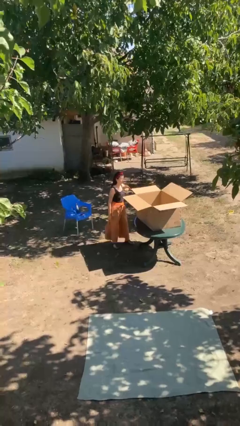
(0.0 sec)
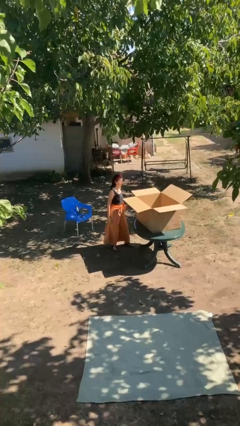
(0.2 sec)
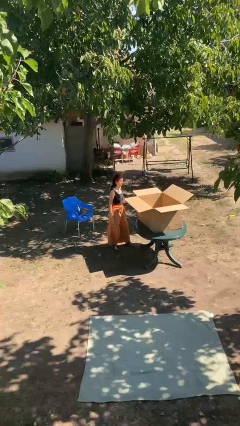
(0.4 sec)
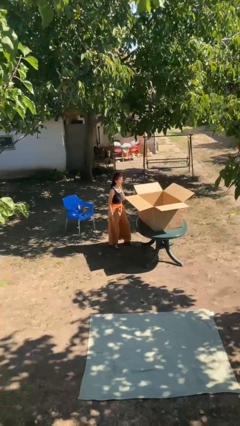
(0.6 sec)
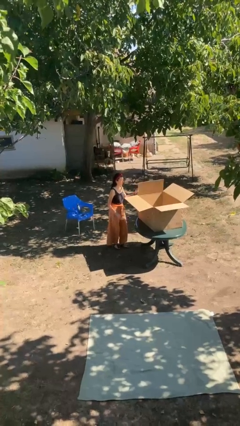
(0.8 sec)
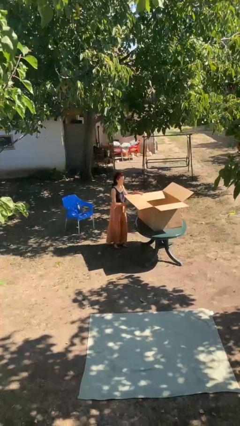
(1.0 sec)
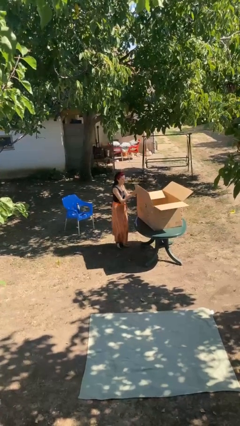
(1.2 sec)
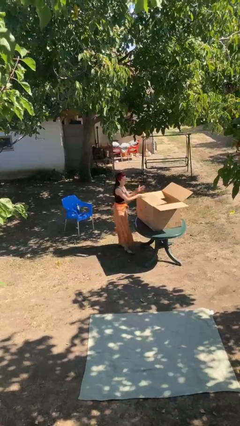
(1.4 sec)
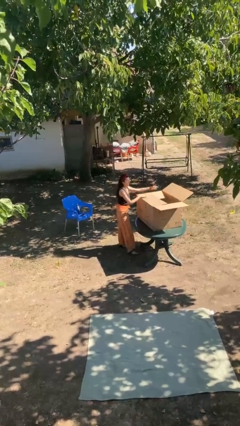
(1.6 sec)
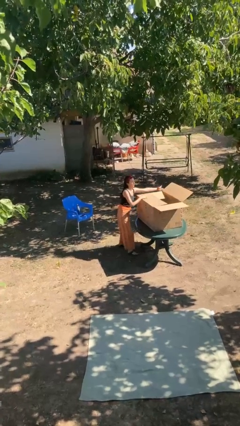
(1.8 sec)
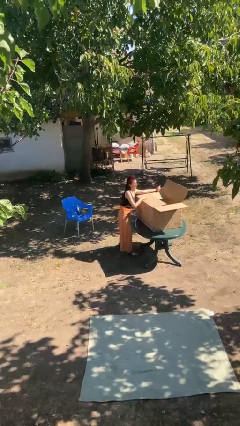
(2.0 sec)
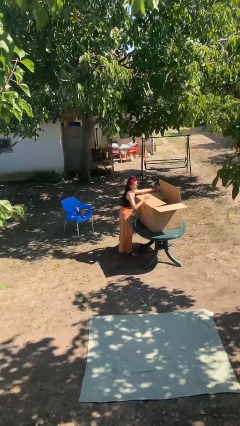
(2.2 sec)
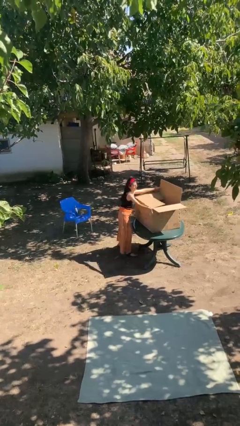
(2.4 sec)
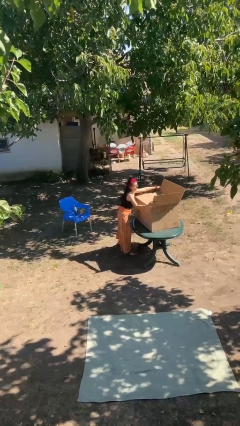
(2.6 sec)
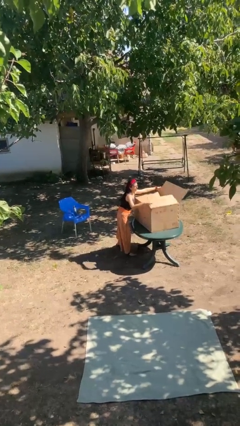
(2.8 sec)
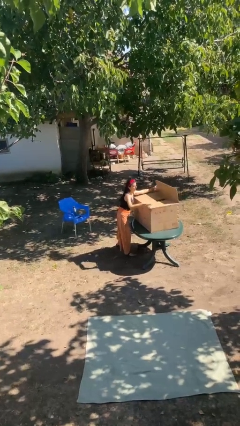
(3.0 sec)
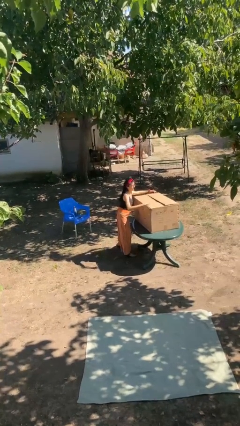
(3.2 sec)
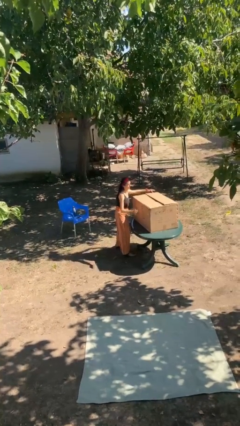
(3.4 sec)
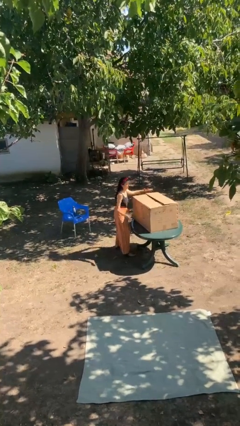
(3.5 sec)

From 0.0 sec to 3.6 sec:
person closes box

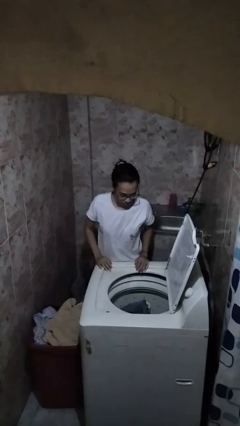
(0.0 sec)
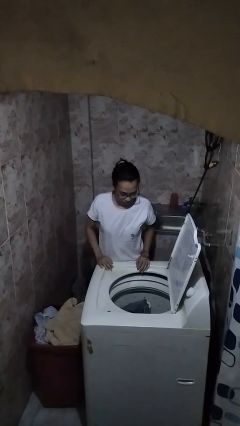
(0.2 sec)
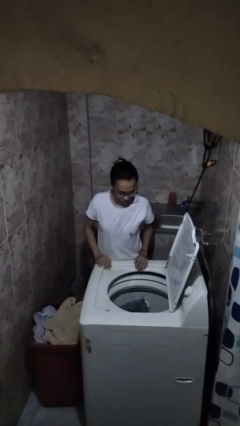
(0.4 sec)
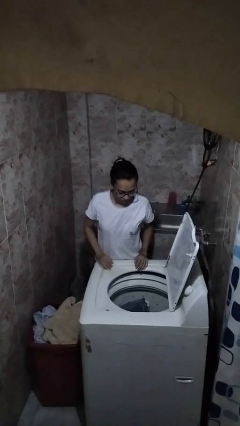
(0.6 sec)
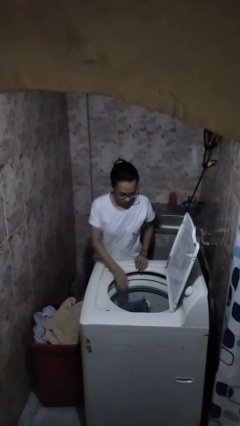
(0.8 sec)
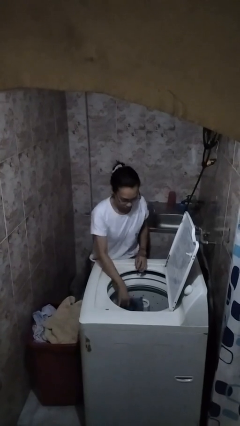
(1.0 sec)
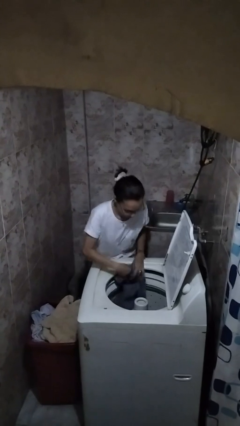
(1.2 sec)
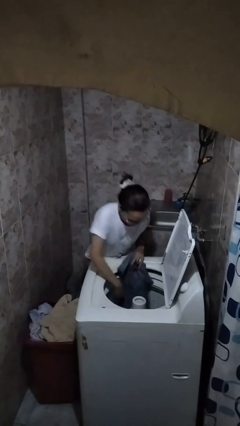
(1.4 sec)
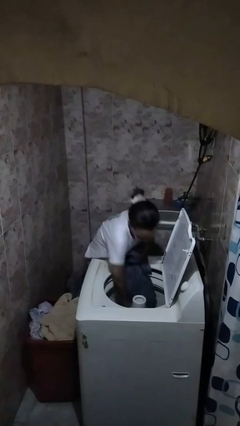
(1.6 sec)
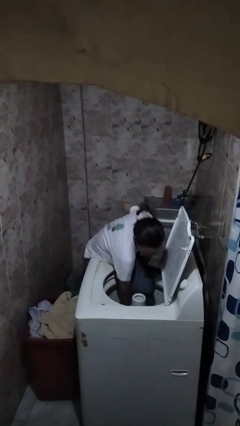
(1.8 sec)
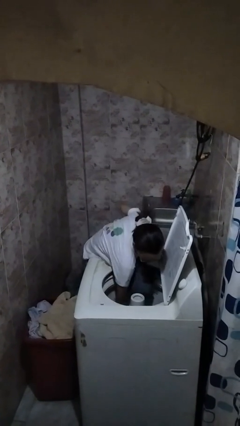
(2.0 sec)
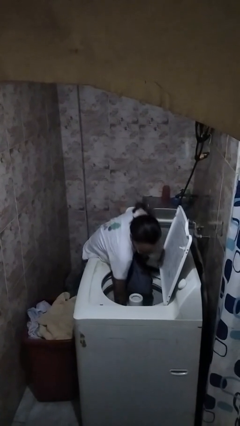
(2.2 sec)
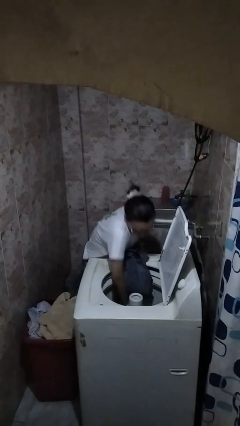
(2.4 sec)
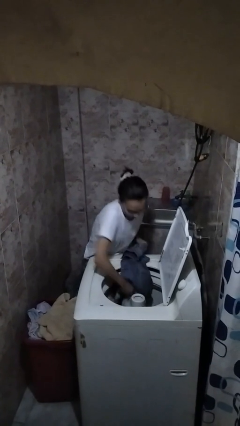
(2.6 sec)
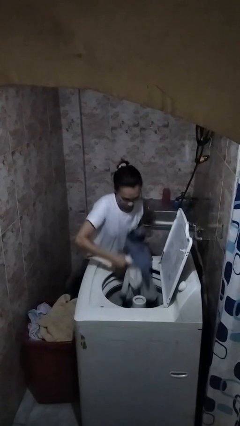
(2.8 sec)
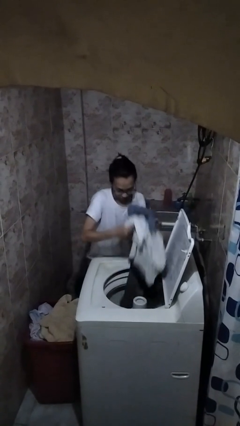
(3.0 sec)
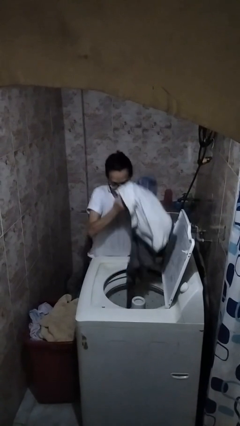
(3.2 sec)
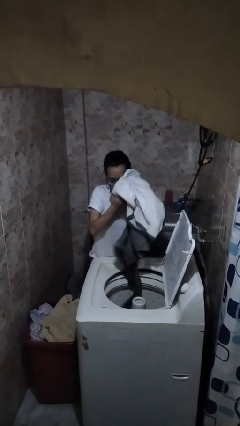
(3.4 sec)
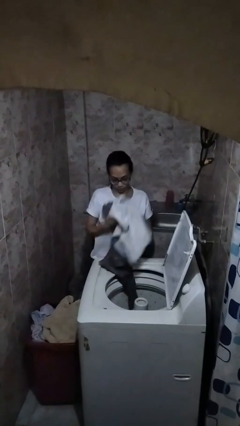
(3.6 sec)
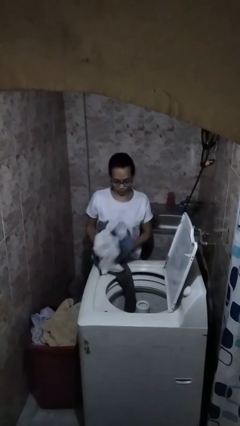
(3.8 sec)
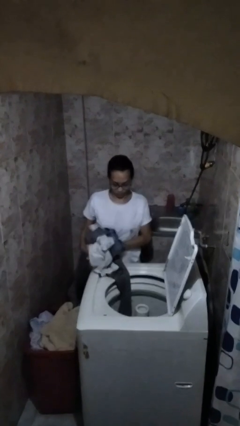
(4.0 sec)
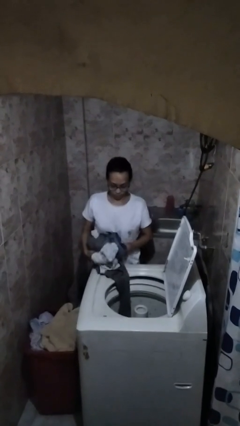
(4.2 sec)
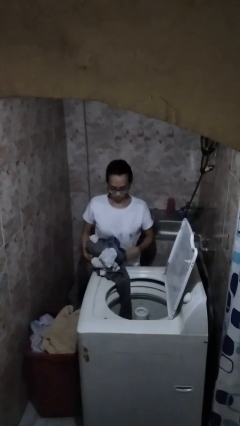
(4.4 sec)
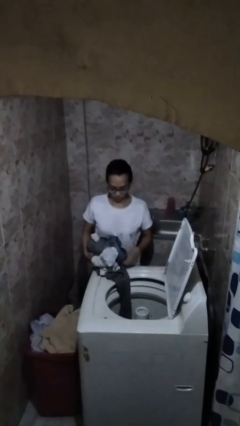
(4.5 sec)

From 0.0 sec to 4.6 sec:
person loads clotheswasher

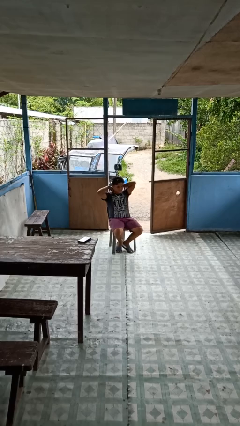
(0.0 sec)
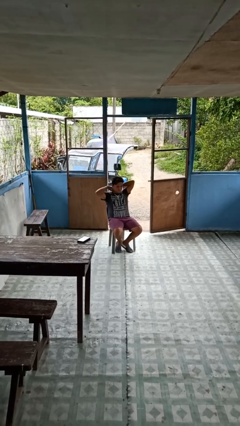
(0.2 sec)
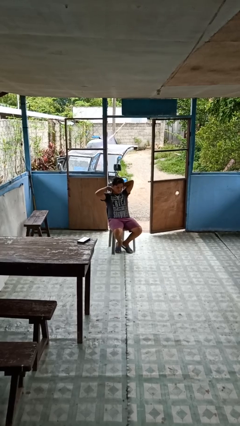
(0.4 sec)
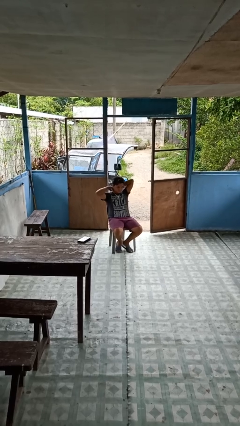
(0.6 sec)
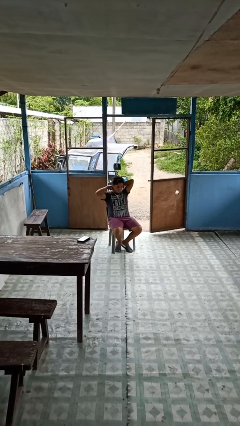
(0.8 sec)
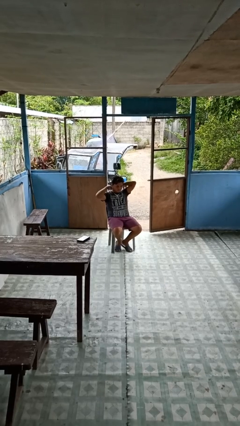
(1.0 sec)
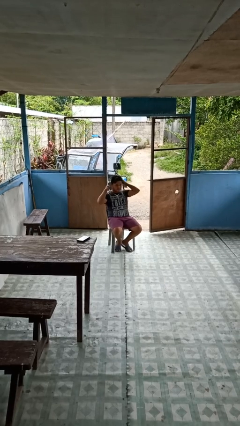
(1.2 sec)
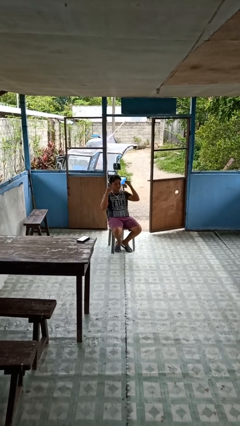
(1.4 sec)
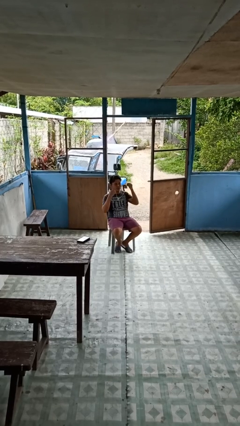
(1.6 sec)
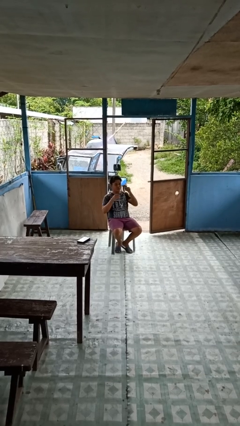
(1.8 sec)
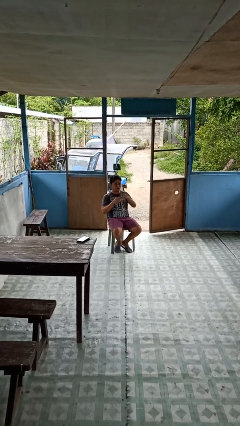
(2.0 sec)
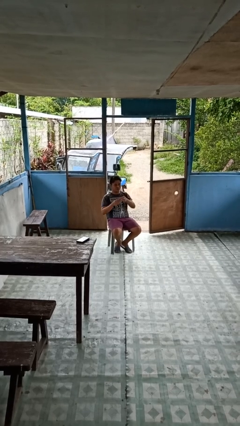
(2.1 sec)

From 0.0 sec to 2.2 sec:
person takes off necklace

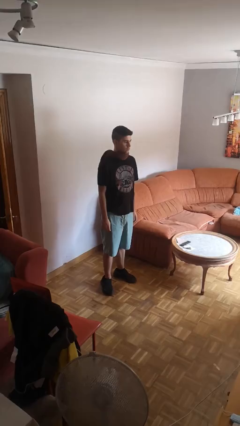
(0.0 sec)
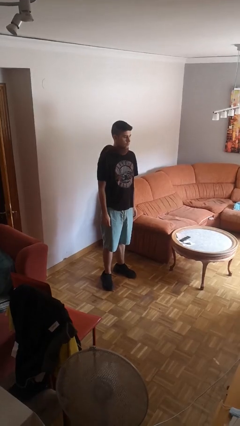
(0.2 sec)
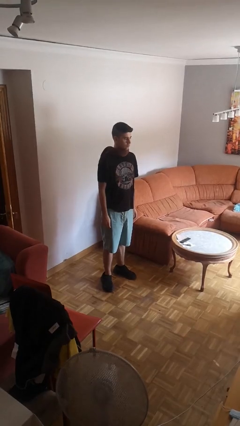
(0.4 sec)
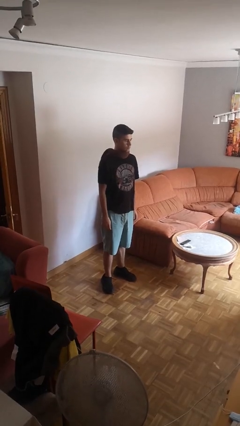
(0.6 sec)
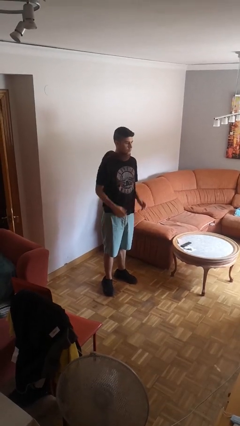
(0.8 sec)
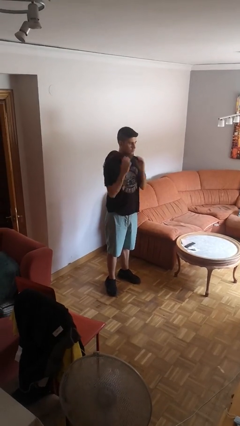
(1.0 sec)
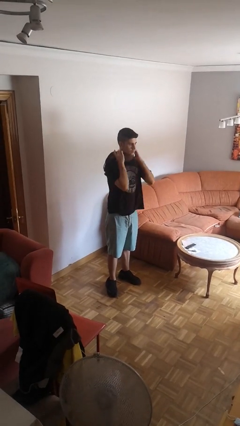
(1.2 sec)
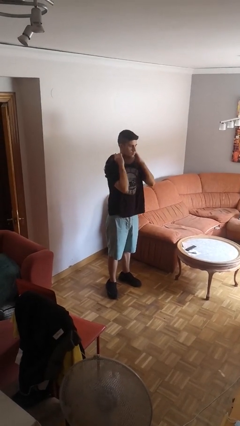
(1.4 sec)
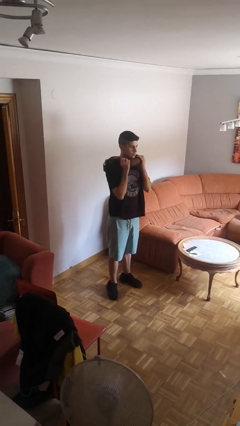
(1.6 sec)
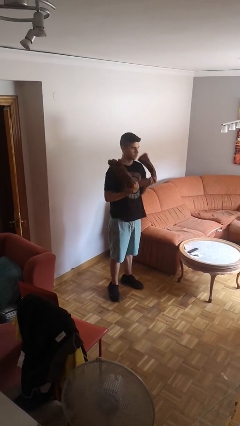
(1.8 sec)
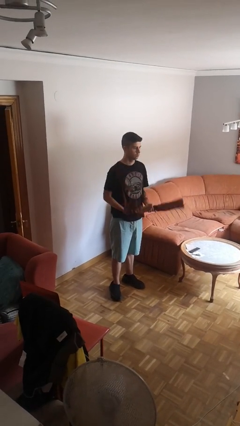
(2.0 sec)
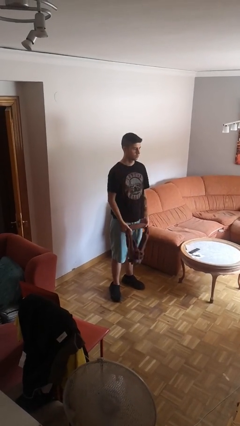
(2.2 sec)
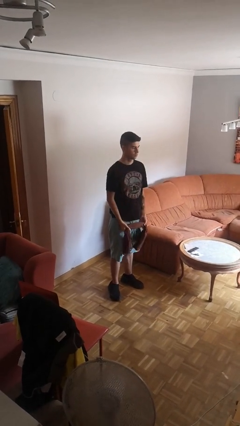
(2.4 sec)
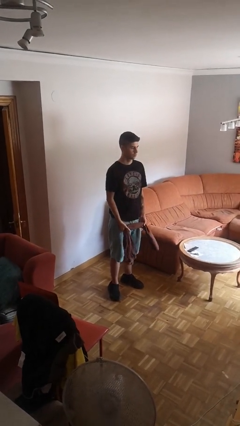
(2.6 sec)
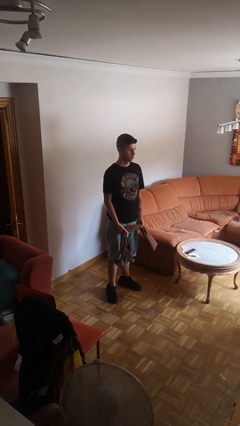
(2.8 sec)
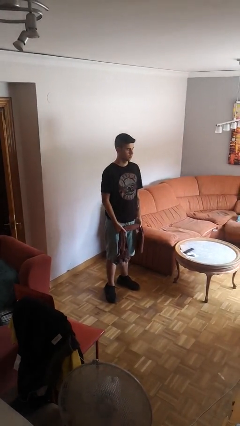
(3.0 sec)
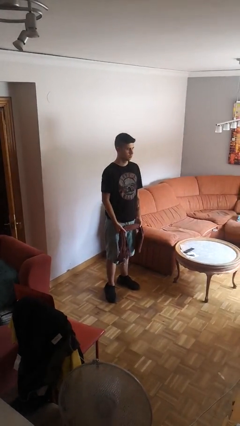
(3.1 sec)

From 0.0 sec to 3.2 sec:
person takes off scarf

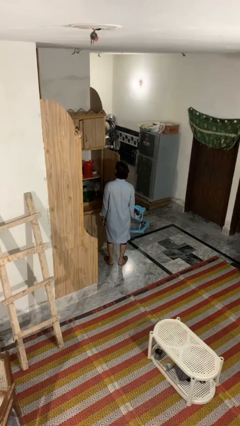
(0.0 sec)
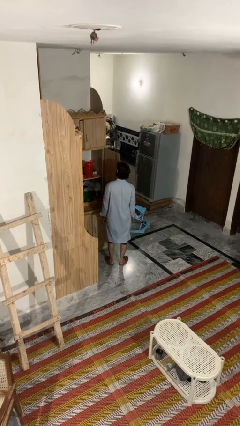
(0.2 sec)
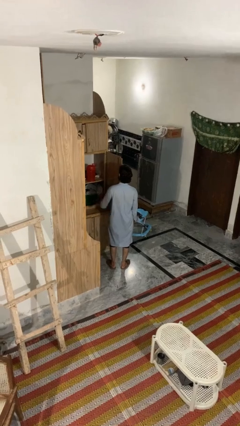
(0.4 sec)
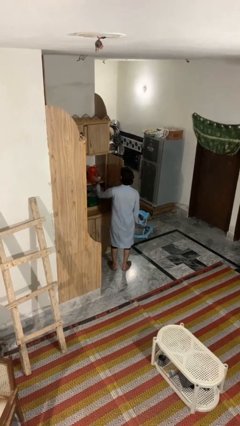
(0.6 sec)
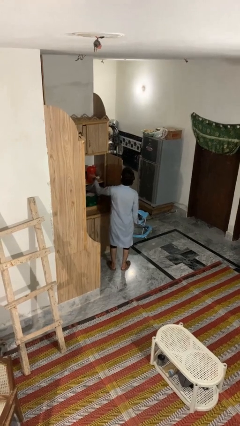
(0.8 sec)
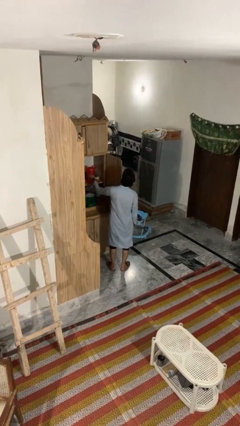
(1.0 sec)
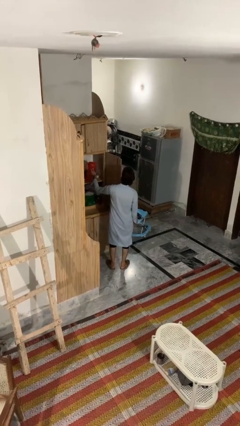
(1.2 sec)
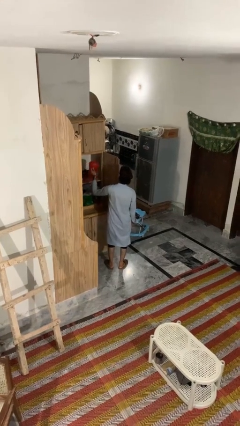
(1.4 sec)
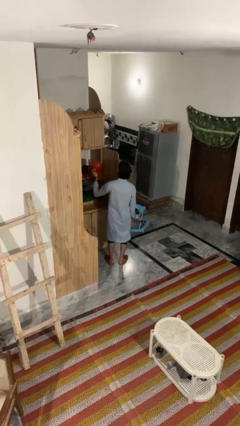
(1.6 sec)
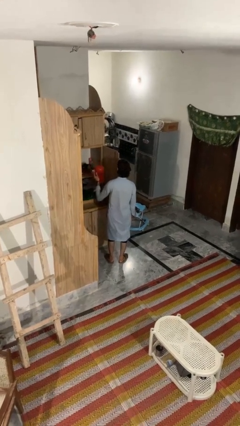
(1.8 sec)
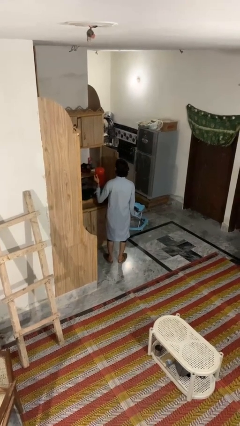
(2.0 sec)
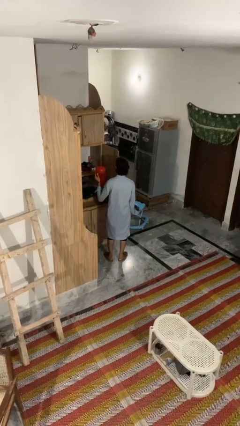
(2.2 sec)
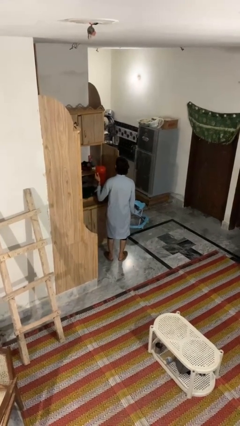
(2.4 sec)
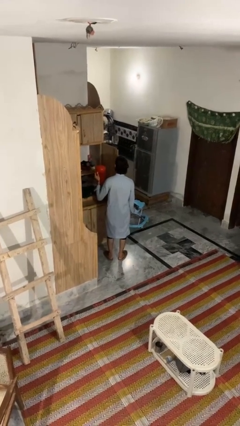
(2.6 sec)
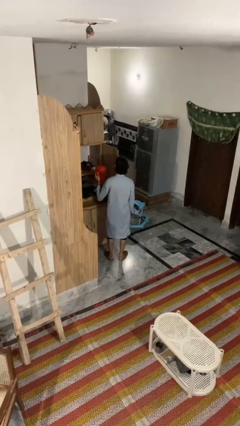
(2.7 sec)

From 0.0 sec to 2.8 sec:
person picks up object from cabinet

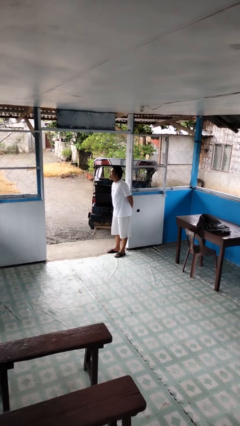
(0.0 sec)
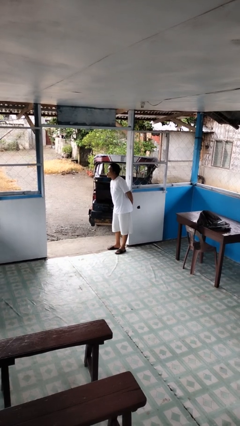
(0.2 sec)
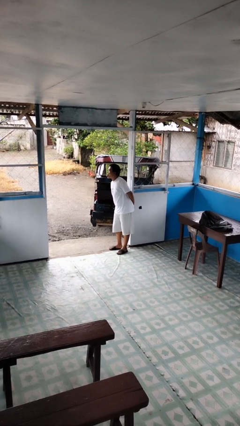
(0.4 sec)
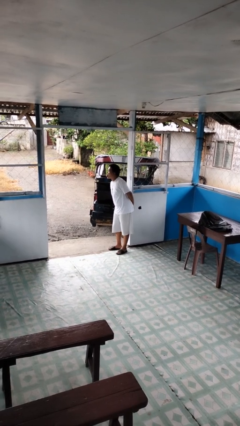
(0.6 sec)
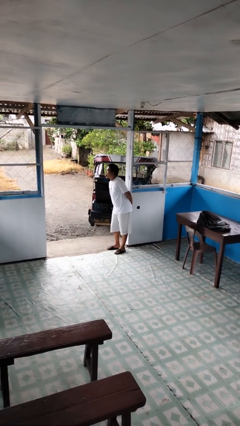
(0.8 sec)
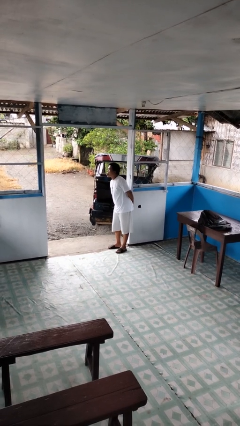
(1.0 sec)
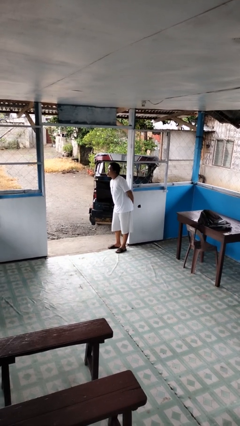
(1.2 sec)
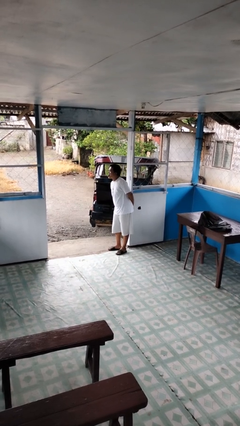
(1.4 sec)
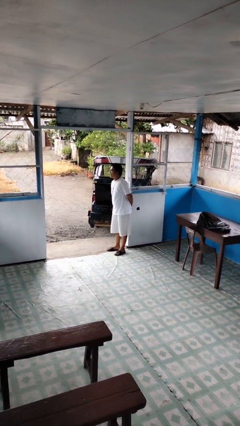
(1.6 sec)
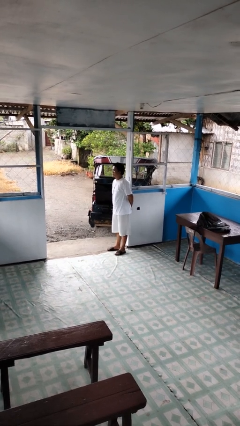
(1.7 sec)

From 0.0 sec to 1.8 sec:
person sticks out tongue
